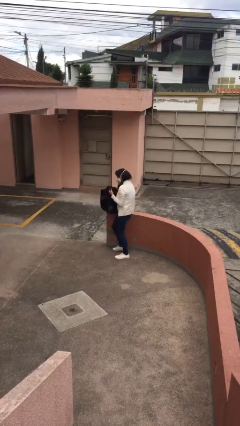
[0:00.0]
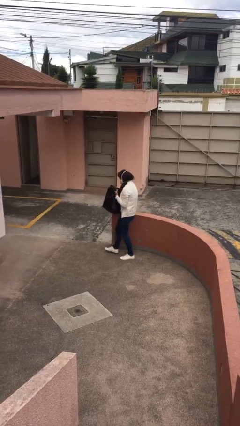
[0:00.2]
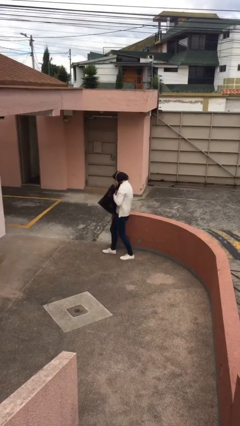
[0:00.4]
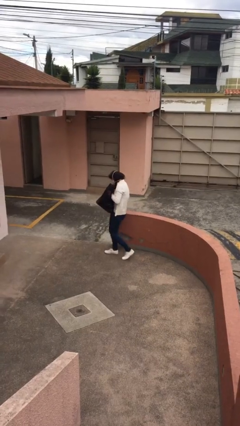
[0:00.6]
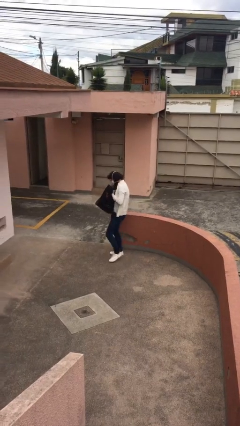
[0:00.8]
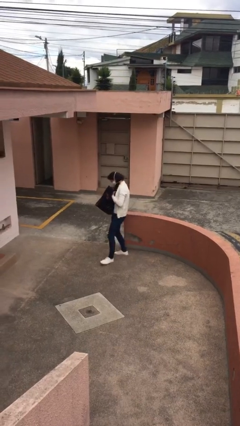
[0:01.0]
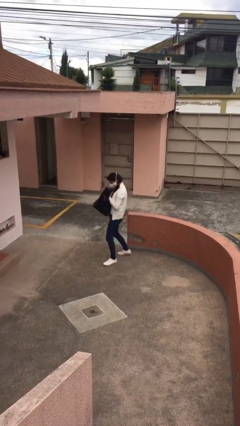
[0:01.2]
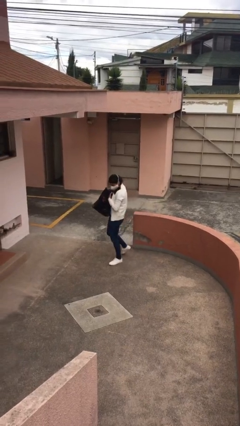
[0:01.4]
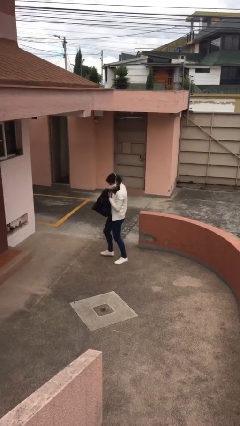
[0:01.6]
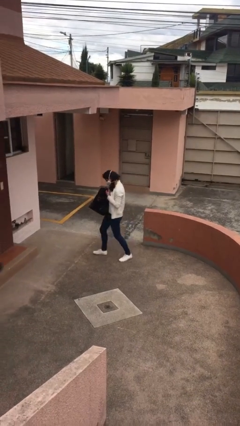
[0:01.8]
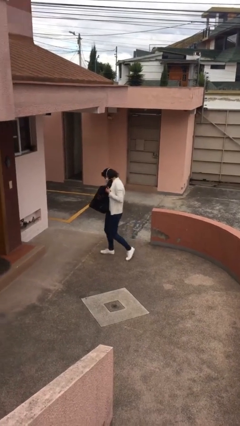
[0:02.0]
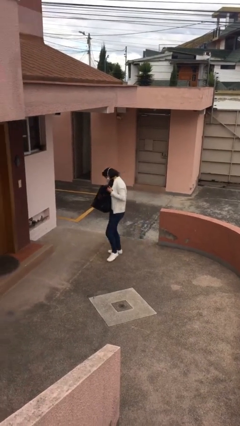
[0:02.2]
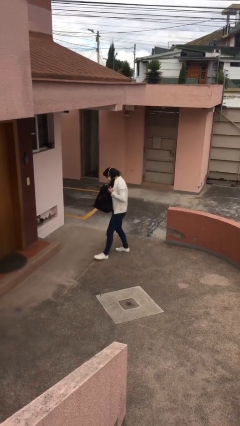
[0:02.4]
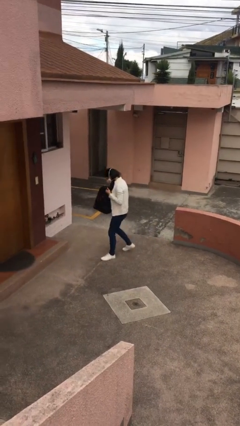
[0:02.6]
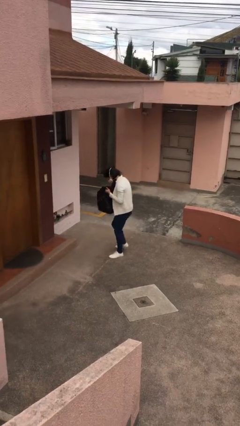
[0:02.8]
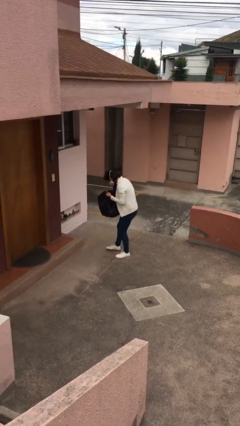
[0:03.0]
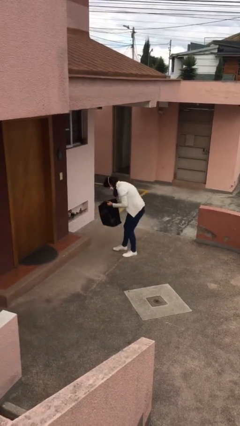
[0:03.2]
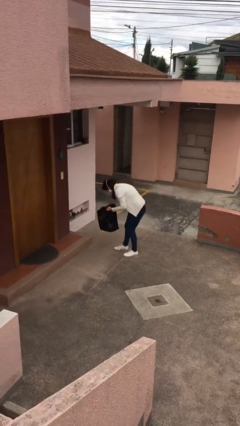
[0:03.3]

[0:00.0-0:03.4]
person carries heavy object

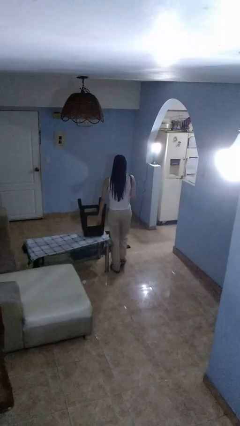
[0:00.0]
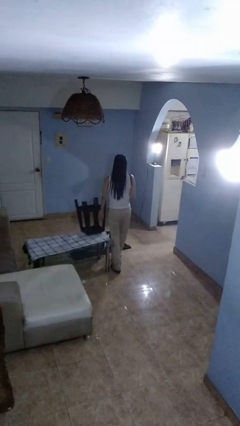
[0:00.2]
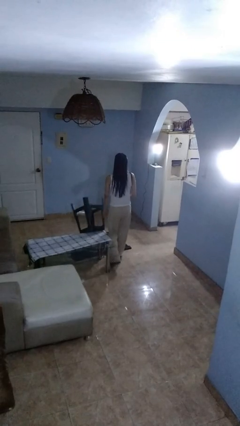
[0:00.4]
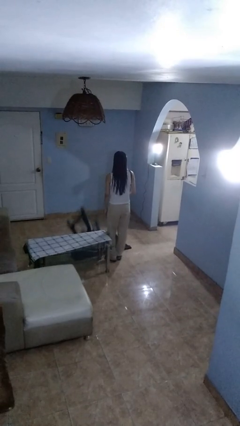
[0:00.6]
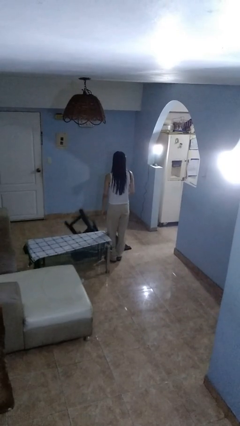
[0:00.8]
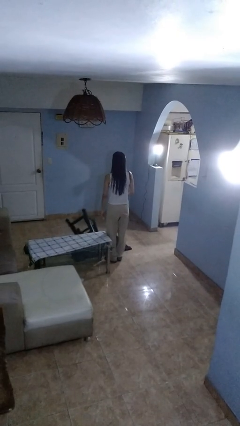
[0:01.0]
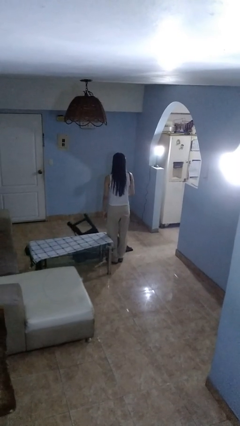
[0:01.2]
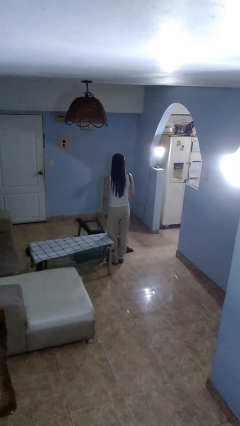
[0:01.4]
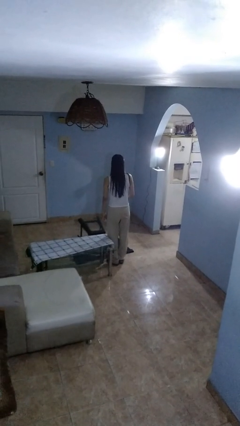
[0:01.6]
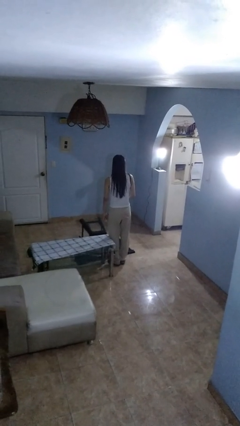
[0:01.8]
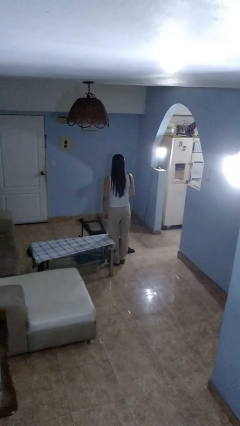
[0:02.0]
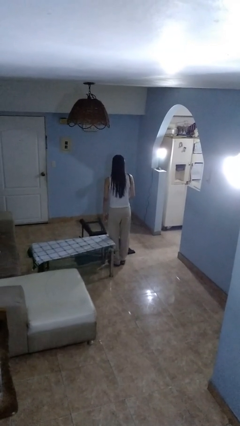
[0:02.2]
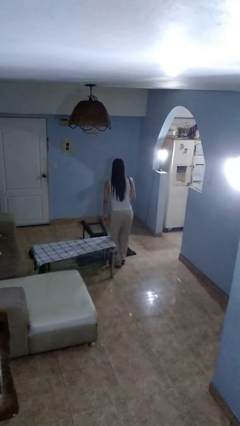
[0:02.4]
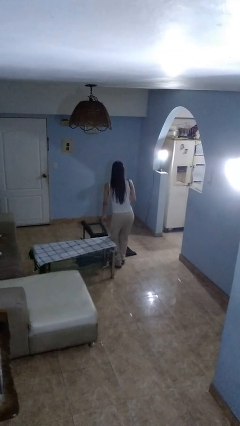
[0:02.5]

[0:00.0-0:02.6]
person knocks over furniture

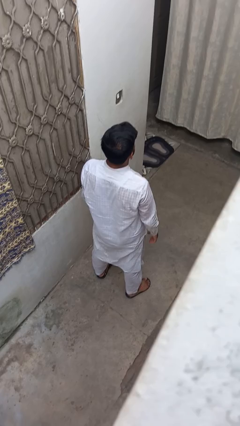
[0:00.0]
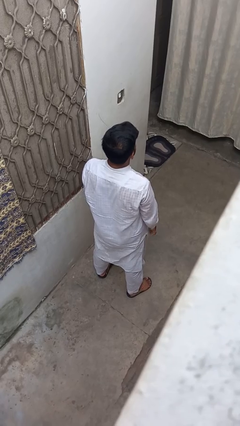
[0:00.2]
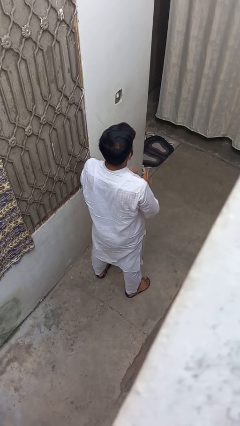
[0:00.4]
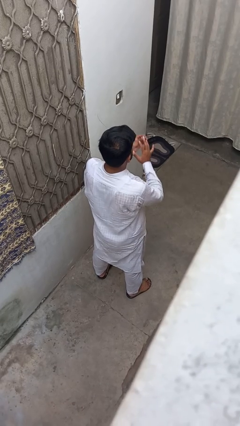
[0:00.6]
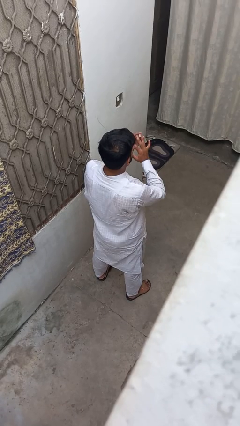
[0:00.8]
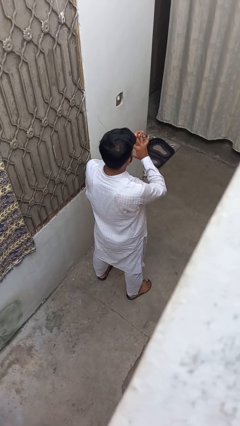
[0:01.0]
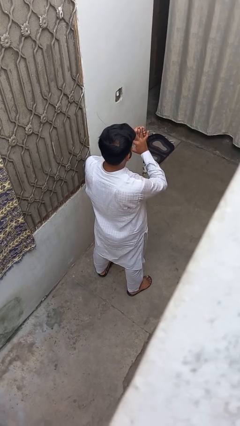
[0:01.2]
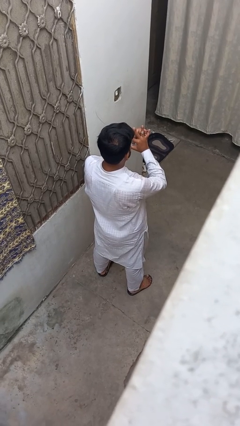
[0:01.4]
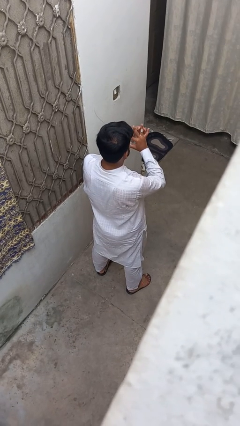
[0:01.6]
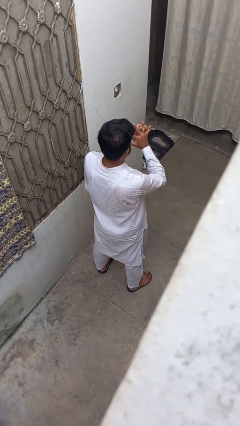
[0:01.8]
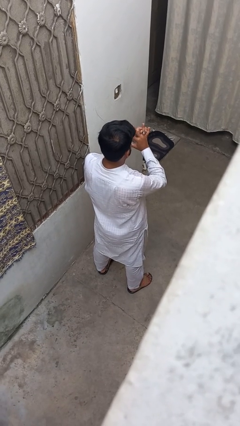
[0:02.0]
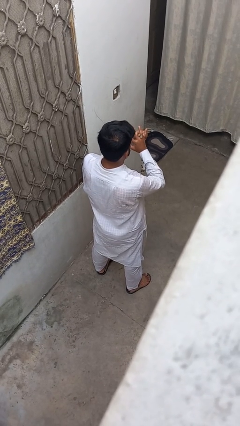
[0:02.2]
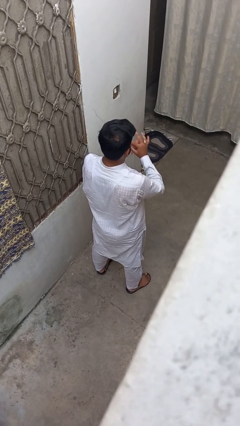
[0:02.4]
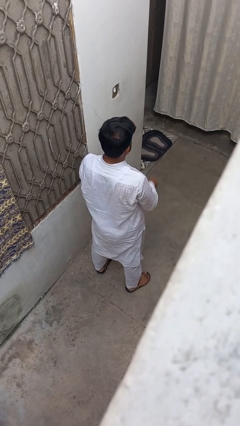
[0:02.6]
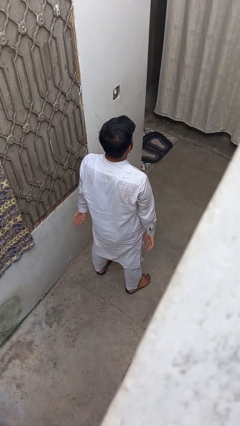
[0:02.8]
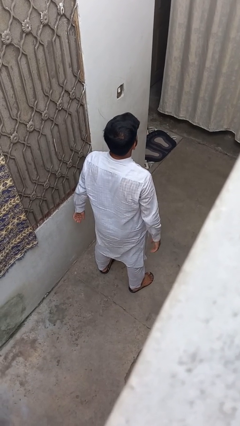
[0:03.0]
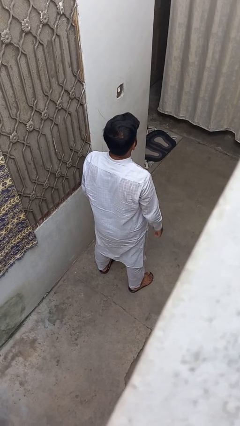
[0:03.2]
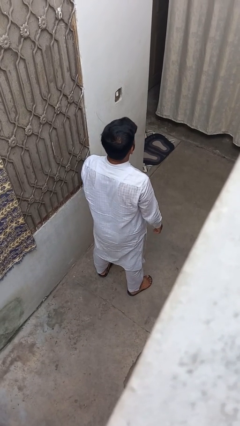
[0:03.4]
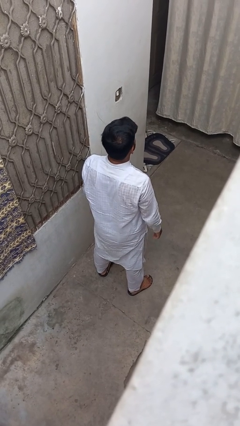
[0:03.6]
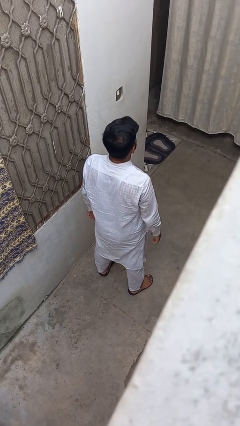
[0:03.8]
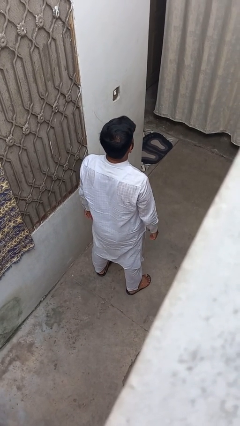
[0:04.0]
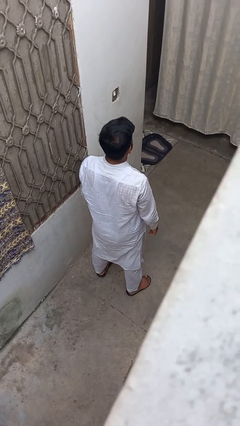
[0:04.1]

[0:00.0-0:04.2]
person puts on ring

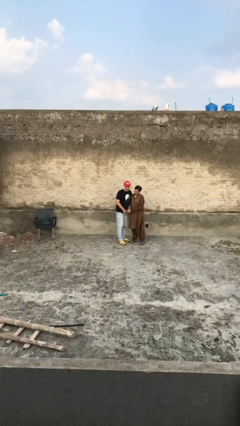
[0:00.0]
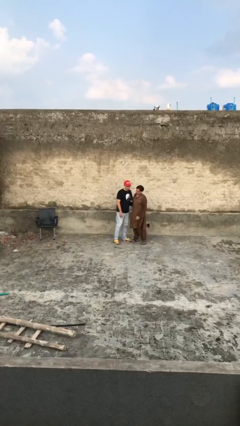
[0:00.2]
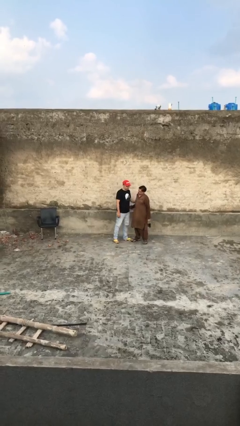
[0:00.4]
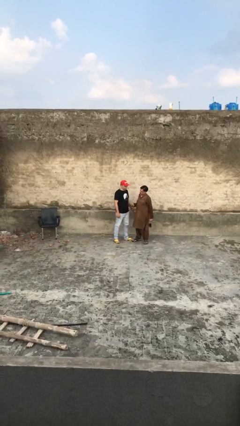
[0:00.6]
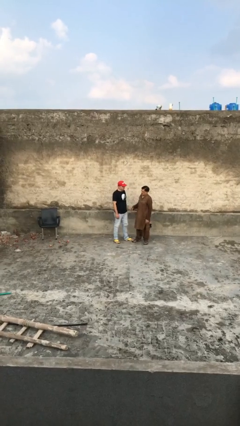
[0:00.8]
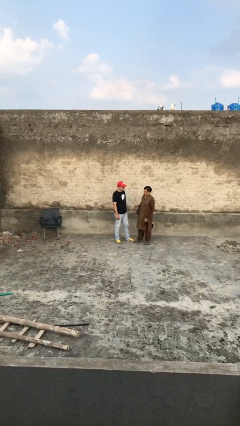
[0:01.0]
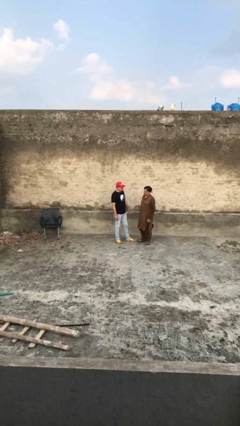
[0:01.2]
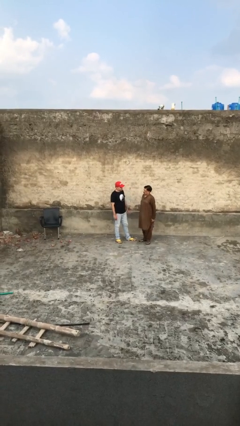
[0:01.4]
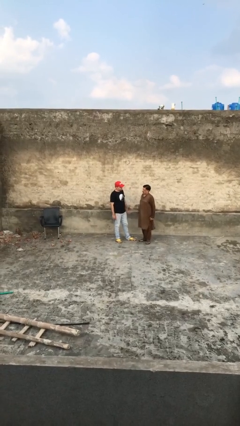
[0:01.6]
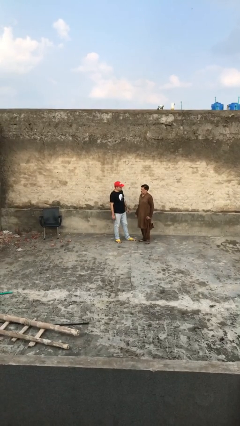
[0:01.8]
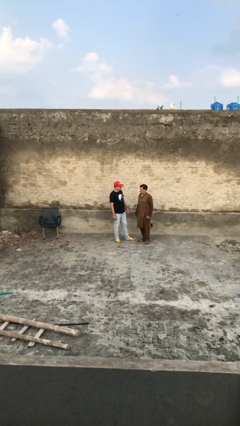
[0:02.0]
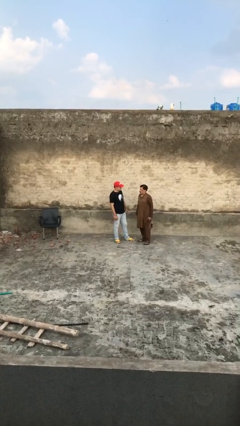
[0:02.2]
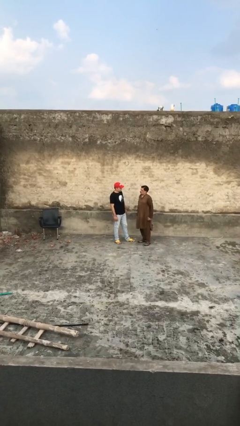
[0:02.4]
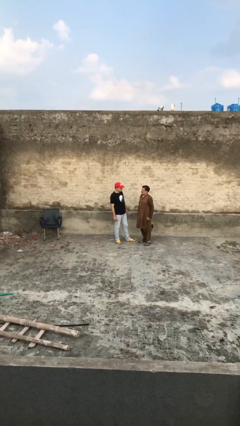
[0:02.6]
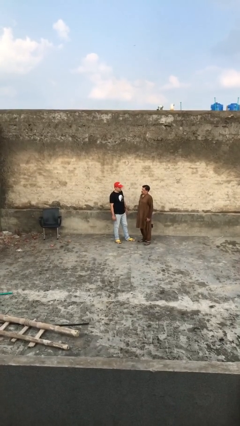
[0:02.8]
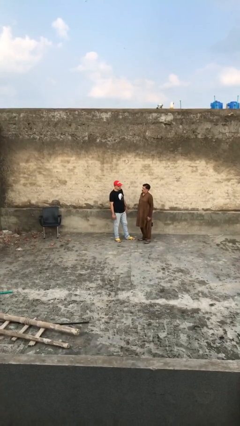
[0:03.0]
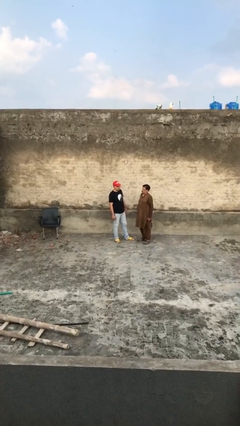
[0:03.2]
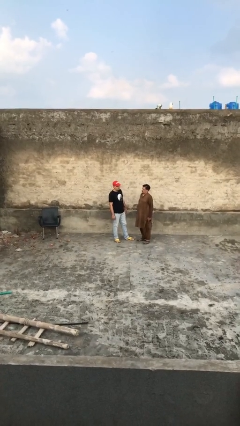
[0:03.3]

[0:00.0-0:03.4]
person talks to person

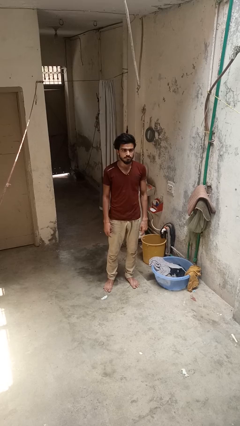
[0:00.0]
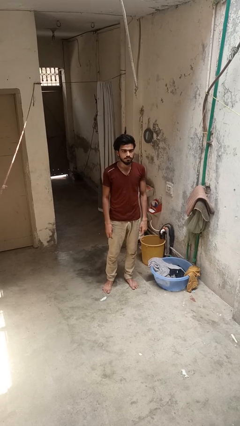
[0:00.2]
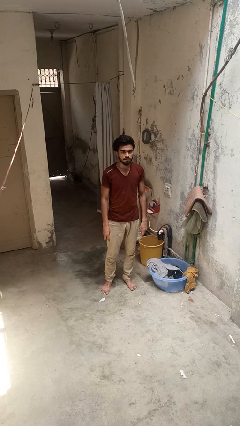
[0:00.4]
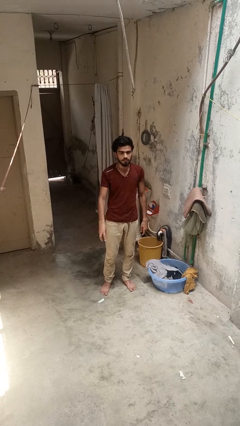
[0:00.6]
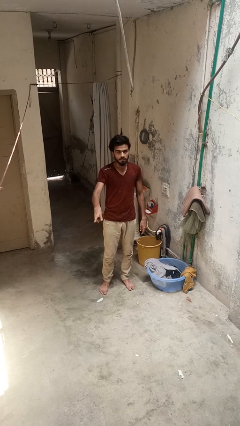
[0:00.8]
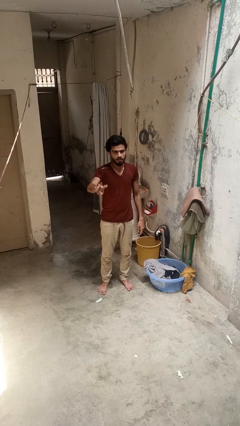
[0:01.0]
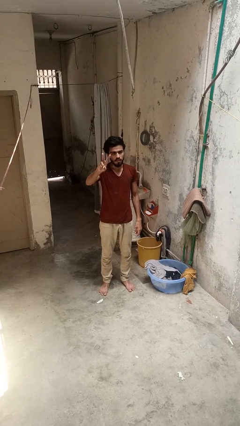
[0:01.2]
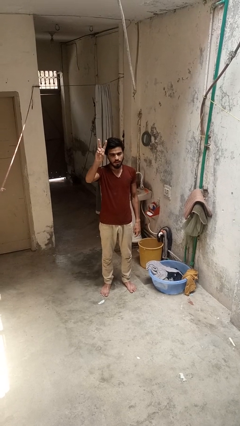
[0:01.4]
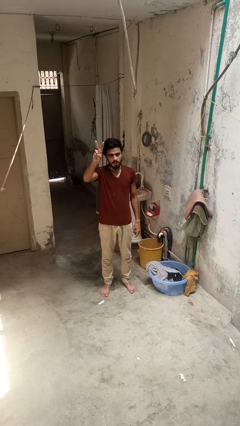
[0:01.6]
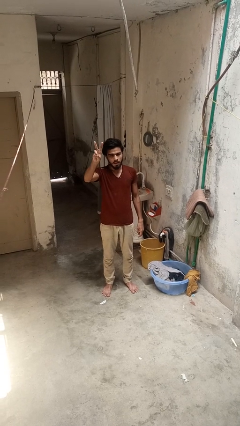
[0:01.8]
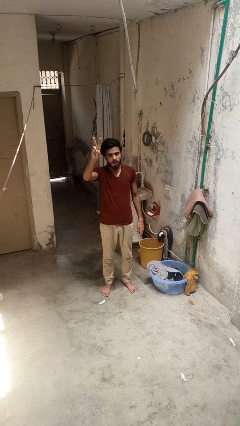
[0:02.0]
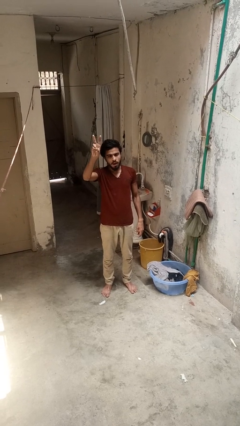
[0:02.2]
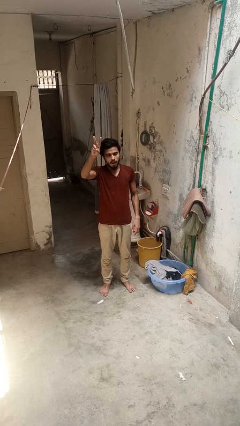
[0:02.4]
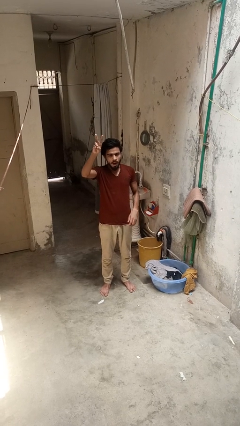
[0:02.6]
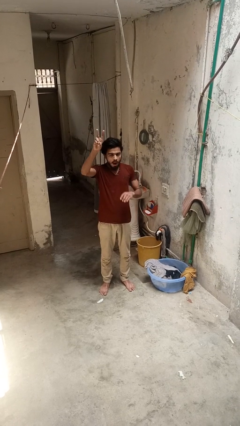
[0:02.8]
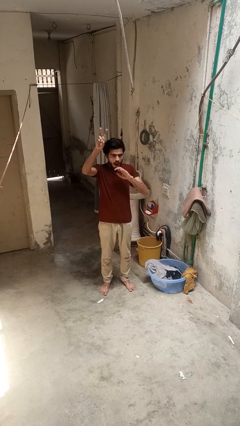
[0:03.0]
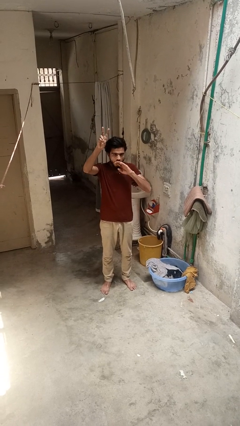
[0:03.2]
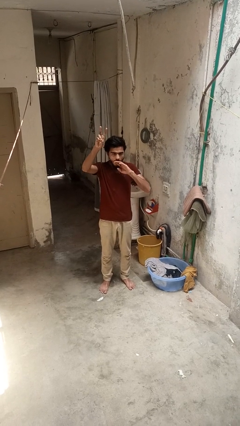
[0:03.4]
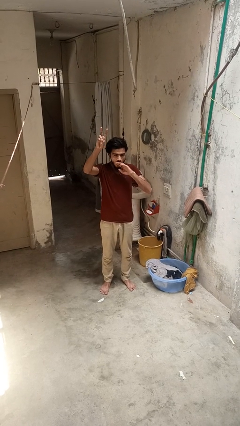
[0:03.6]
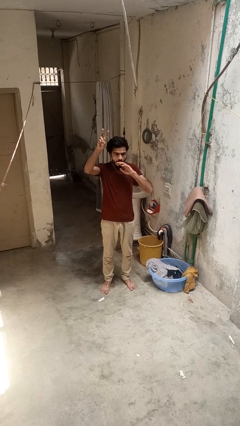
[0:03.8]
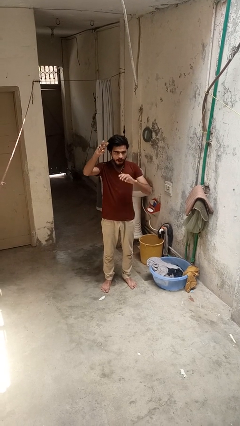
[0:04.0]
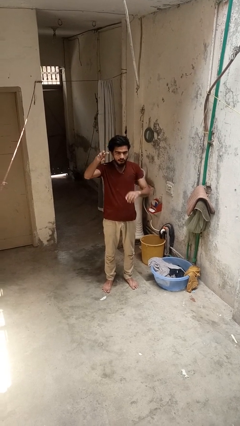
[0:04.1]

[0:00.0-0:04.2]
person gestures peace
